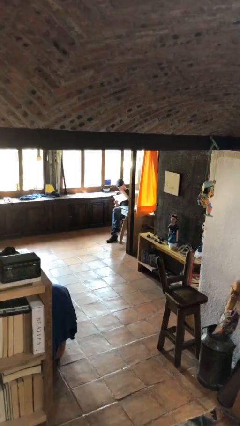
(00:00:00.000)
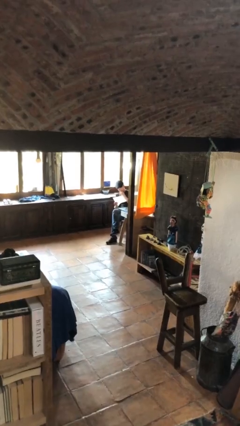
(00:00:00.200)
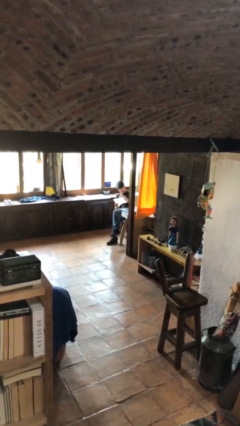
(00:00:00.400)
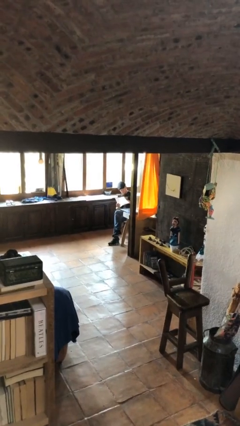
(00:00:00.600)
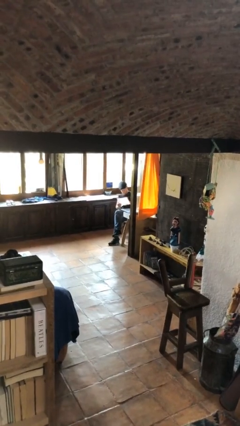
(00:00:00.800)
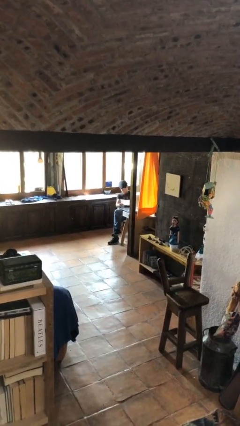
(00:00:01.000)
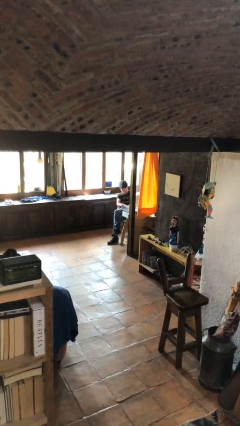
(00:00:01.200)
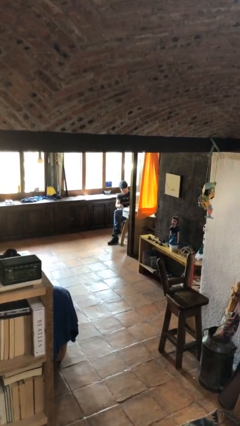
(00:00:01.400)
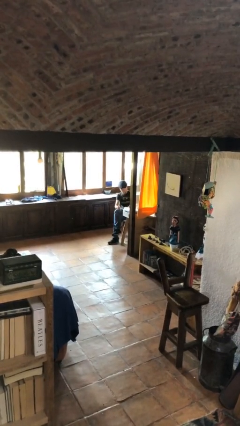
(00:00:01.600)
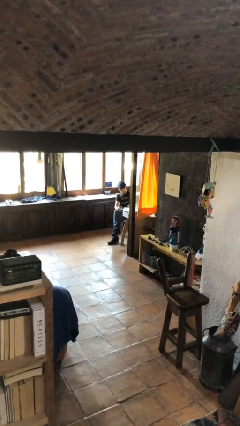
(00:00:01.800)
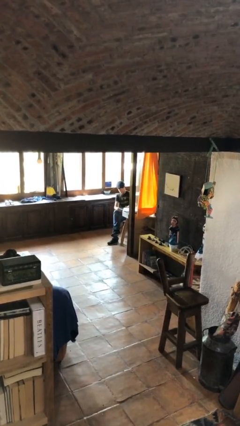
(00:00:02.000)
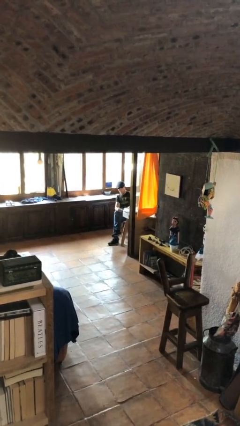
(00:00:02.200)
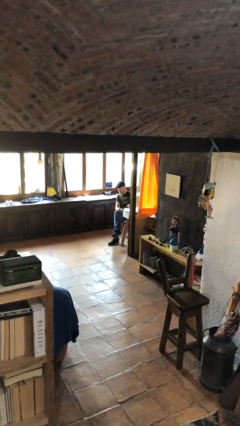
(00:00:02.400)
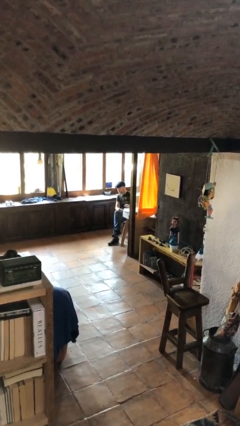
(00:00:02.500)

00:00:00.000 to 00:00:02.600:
person puts down object on table

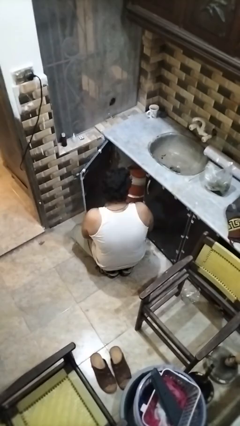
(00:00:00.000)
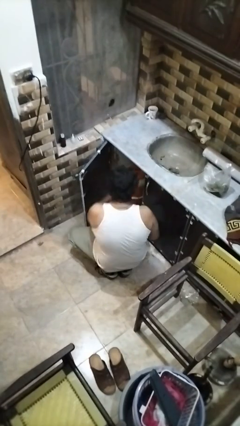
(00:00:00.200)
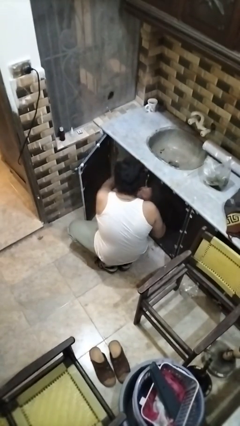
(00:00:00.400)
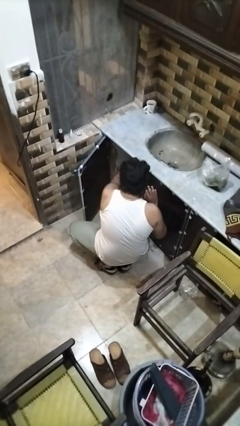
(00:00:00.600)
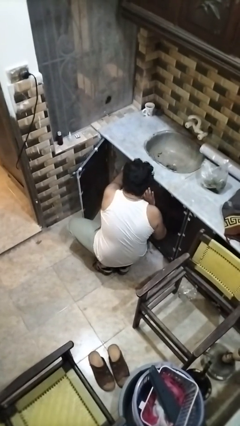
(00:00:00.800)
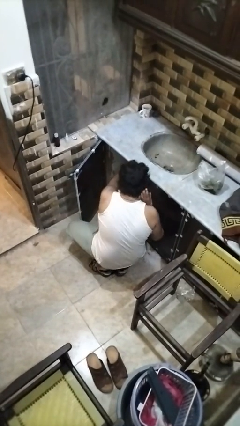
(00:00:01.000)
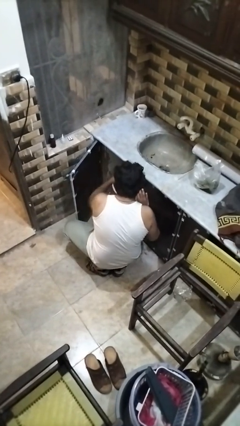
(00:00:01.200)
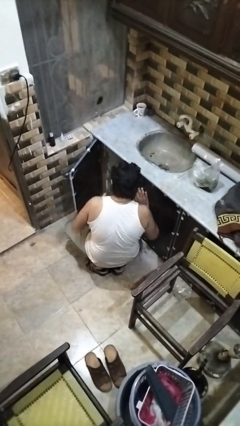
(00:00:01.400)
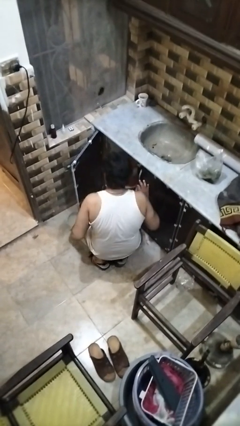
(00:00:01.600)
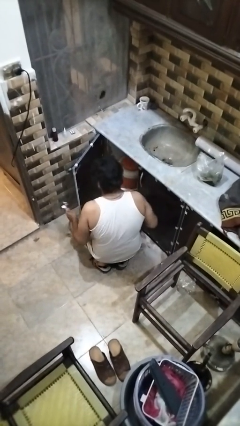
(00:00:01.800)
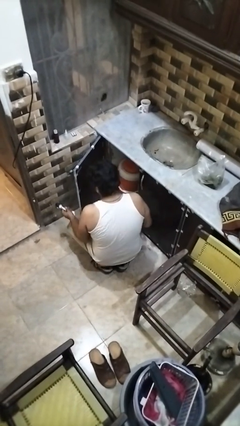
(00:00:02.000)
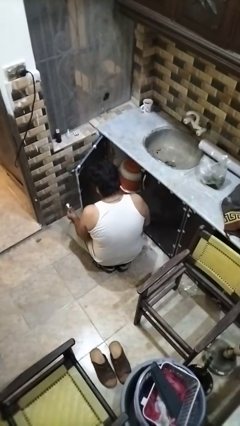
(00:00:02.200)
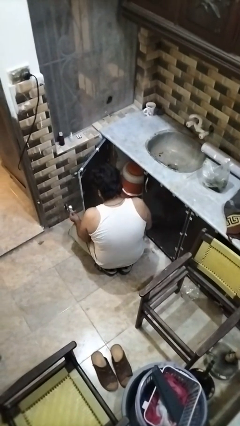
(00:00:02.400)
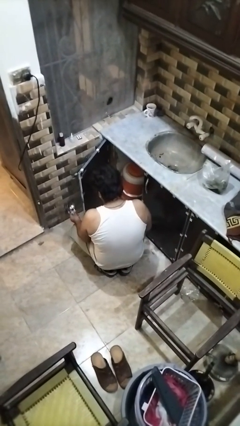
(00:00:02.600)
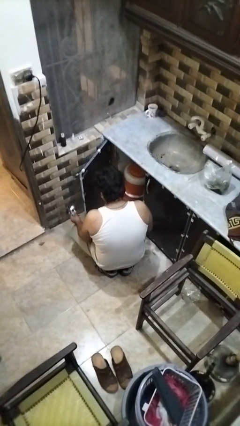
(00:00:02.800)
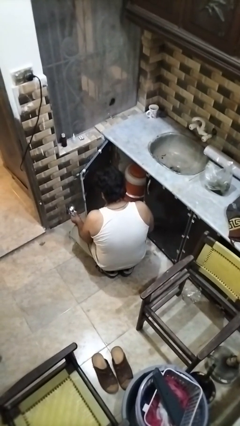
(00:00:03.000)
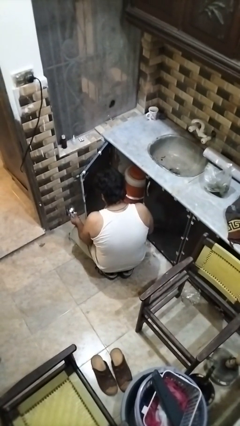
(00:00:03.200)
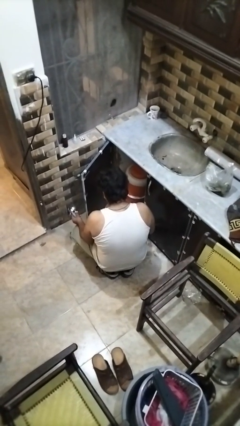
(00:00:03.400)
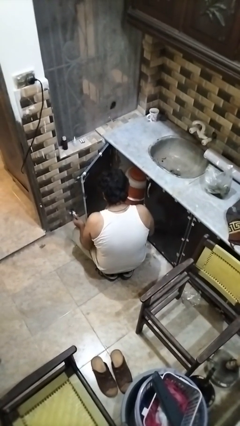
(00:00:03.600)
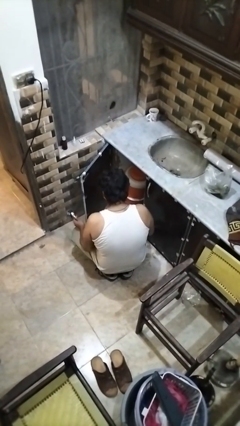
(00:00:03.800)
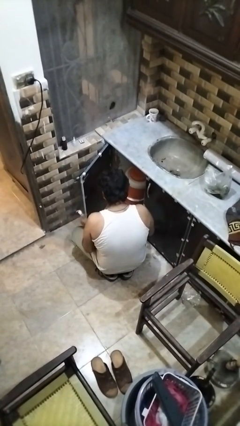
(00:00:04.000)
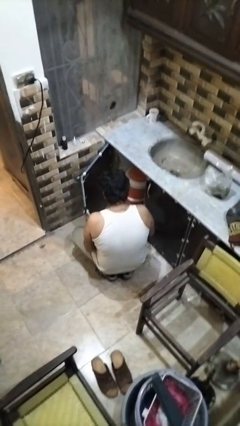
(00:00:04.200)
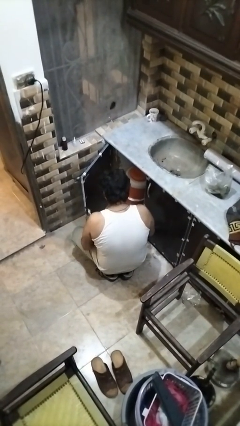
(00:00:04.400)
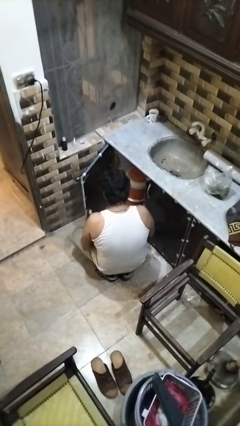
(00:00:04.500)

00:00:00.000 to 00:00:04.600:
person takes object from kitchen drawer

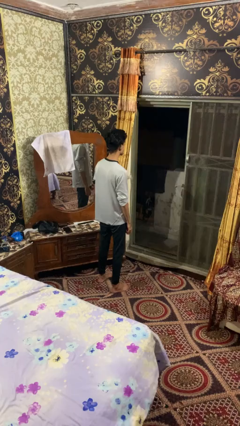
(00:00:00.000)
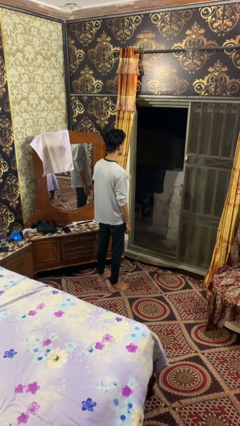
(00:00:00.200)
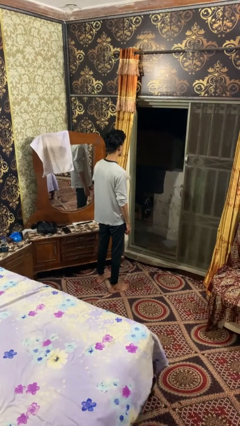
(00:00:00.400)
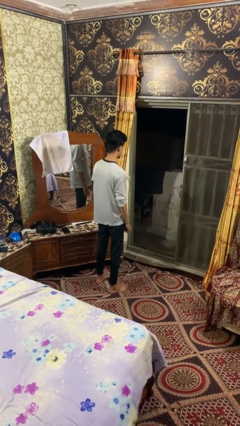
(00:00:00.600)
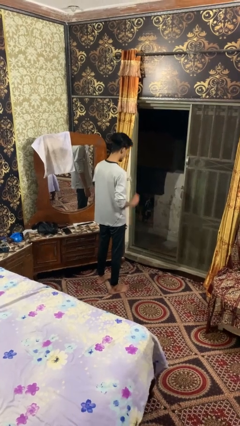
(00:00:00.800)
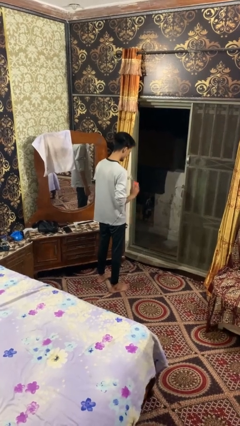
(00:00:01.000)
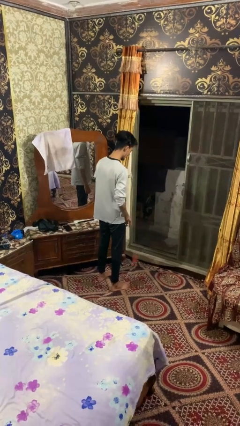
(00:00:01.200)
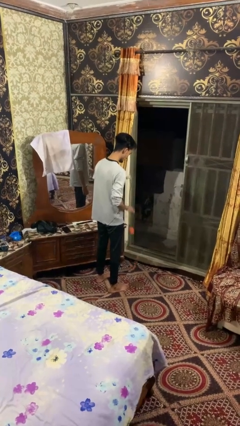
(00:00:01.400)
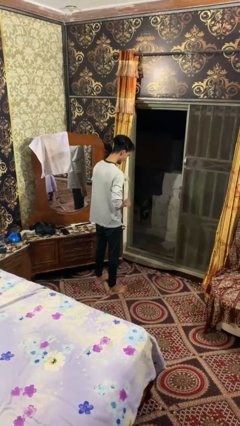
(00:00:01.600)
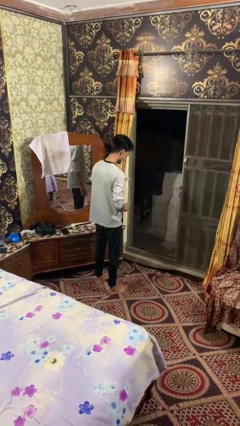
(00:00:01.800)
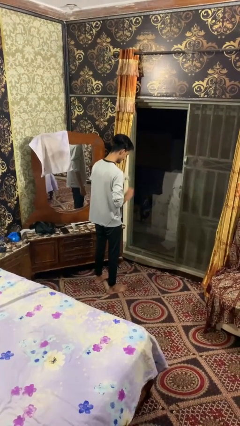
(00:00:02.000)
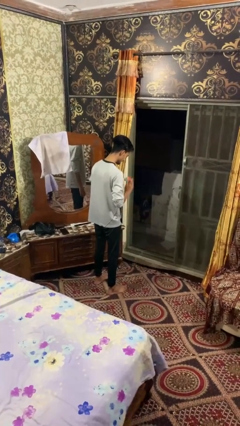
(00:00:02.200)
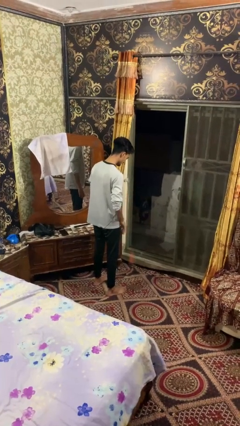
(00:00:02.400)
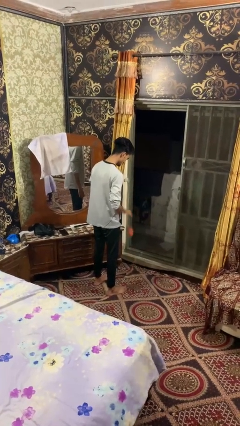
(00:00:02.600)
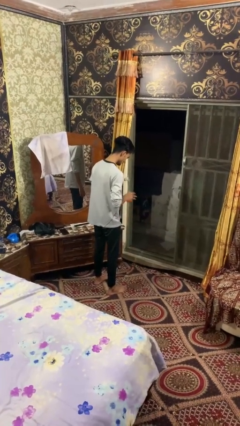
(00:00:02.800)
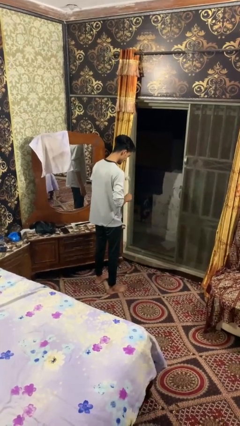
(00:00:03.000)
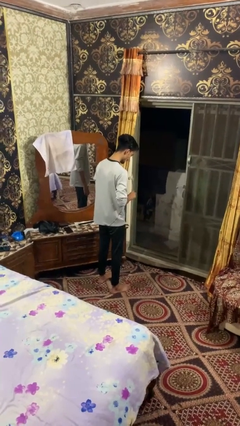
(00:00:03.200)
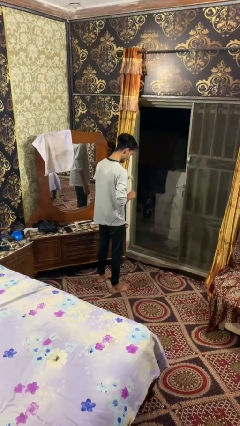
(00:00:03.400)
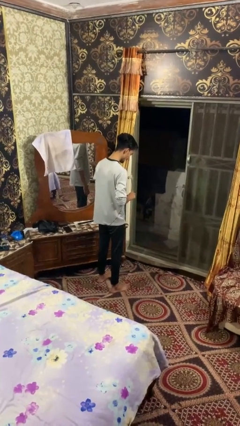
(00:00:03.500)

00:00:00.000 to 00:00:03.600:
person bounces ball on floor

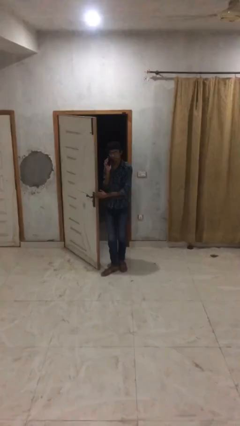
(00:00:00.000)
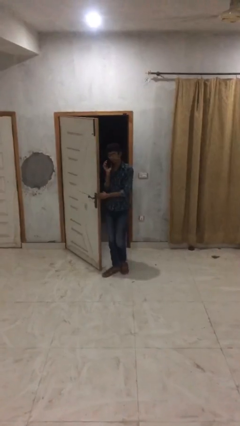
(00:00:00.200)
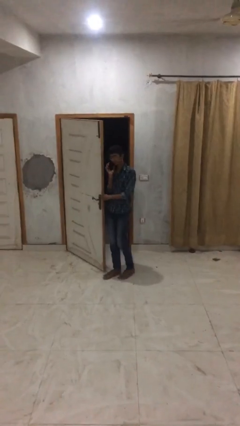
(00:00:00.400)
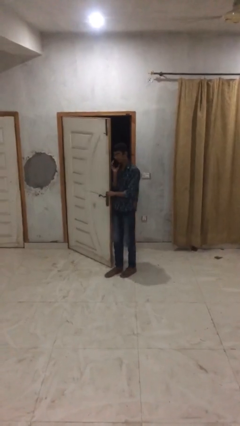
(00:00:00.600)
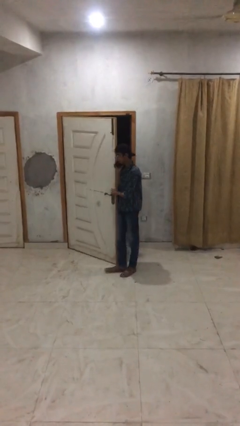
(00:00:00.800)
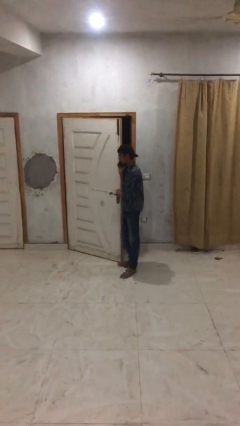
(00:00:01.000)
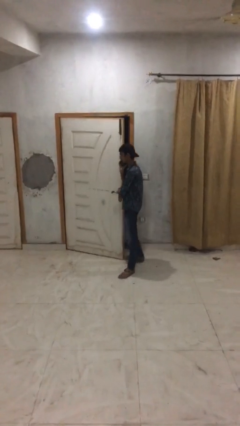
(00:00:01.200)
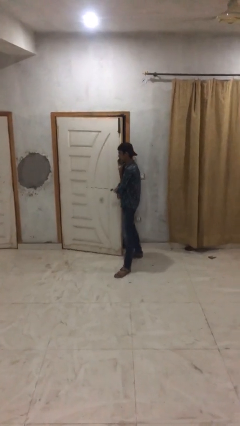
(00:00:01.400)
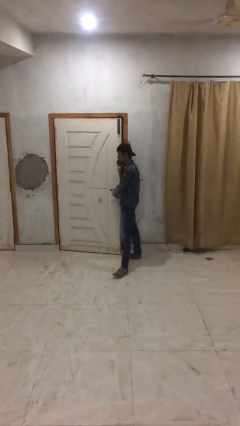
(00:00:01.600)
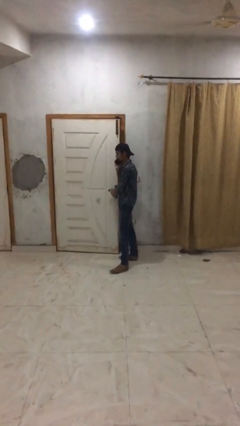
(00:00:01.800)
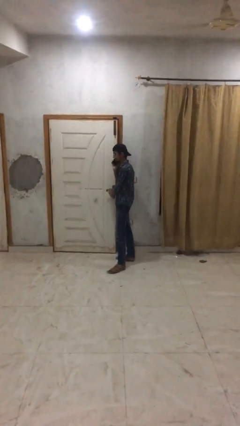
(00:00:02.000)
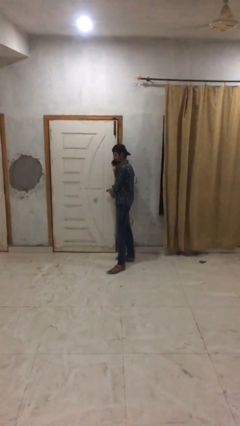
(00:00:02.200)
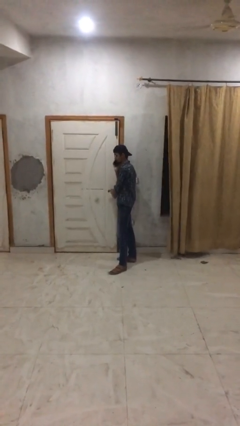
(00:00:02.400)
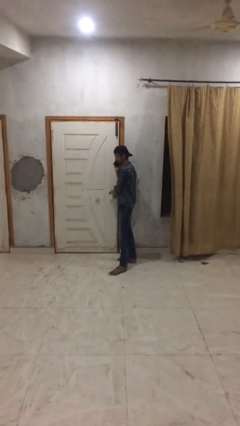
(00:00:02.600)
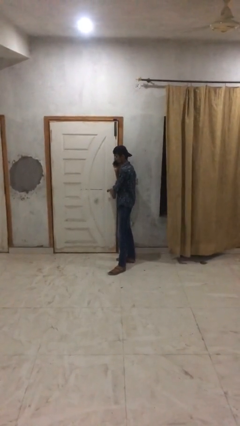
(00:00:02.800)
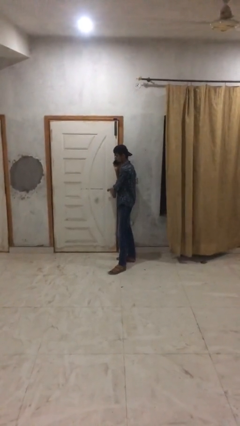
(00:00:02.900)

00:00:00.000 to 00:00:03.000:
person closes facility door

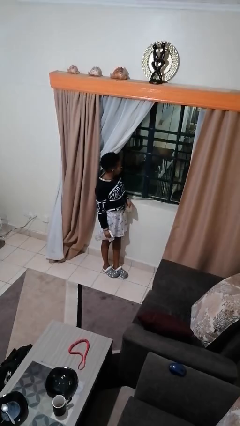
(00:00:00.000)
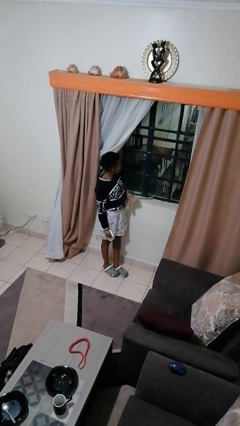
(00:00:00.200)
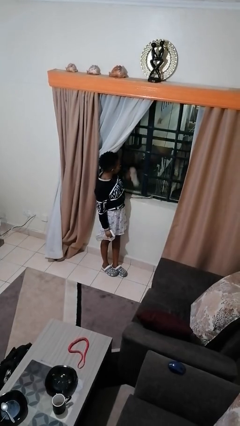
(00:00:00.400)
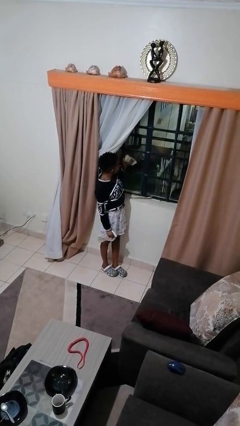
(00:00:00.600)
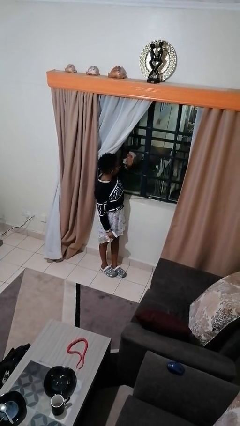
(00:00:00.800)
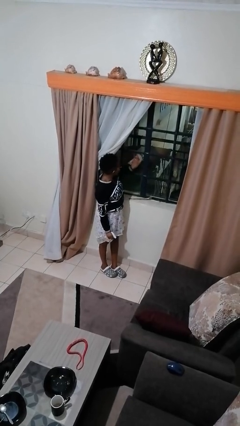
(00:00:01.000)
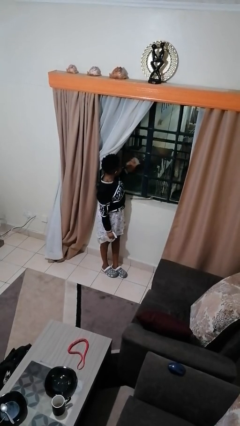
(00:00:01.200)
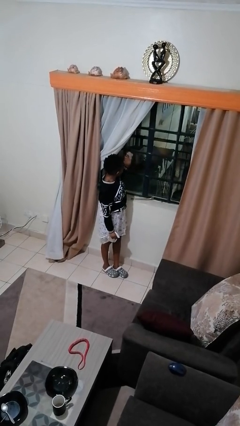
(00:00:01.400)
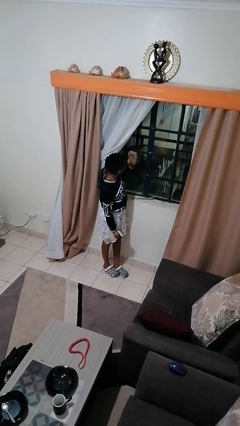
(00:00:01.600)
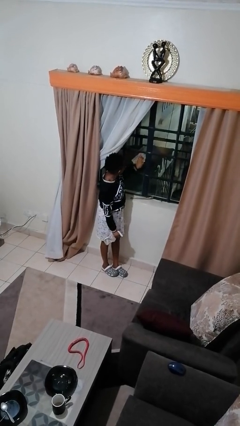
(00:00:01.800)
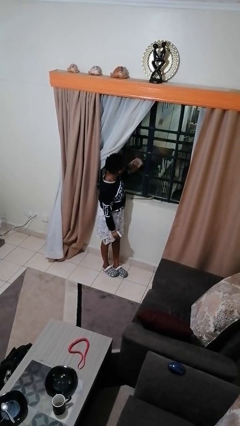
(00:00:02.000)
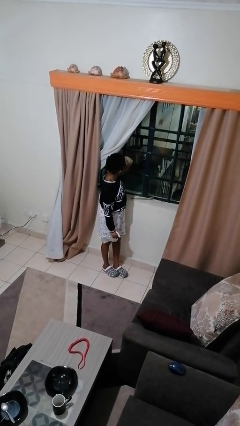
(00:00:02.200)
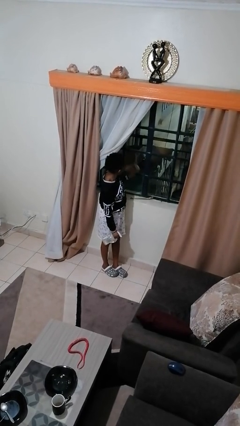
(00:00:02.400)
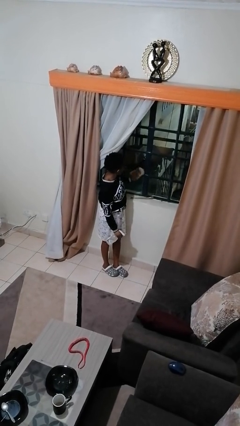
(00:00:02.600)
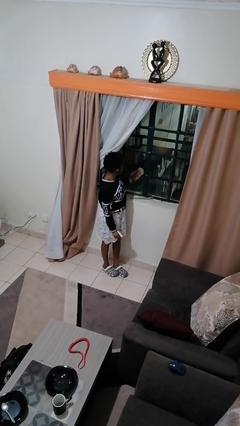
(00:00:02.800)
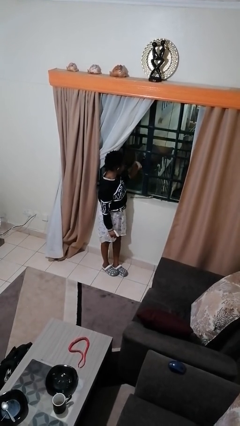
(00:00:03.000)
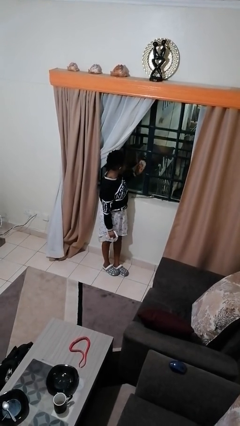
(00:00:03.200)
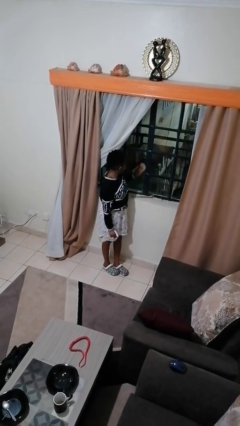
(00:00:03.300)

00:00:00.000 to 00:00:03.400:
person washes window
